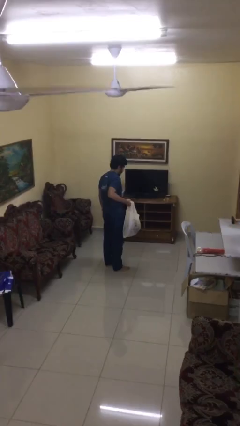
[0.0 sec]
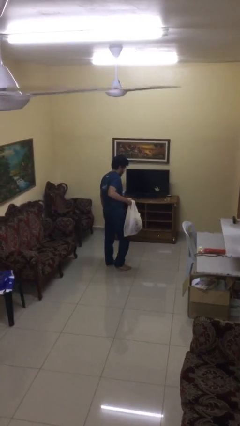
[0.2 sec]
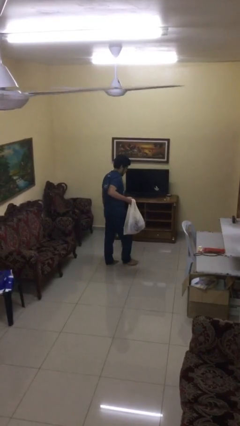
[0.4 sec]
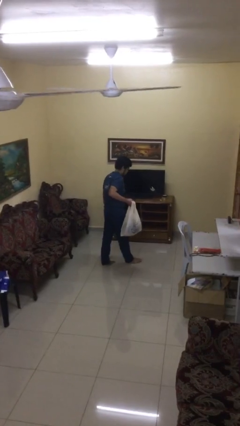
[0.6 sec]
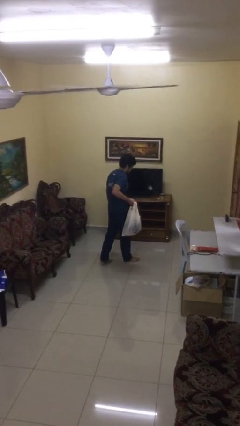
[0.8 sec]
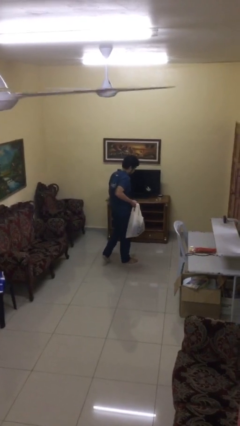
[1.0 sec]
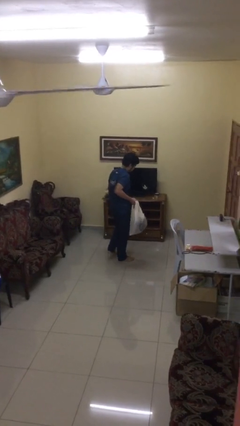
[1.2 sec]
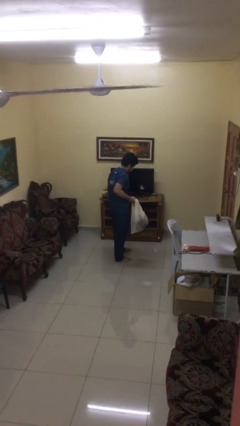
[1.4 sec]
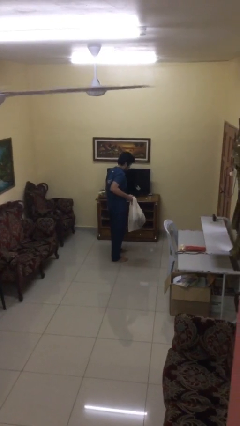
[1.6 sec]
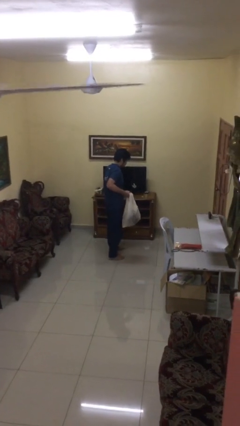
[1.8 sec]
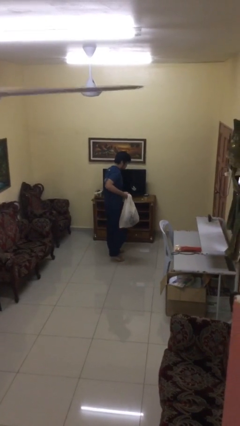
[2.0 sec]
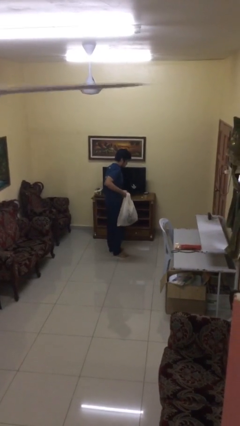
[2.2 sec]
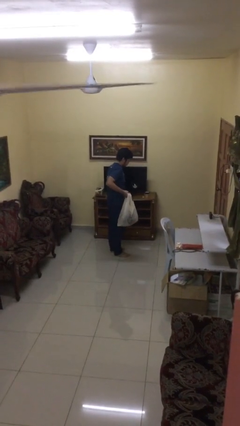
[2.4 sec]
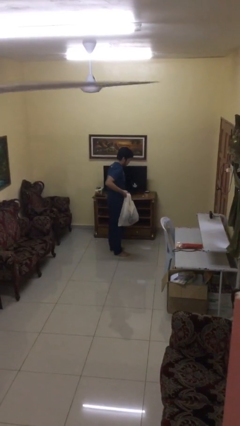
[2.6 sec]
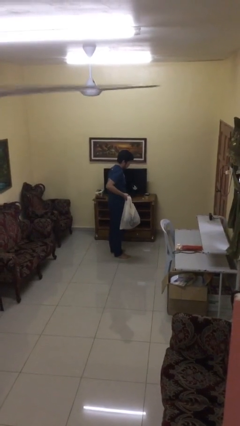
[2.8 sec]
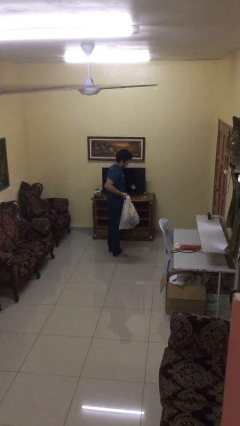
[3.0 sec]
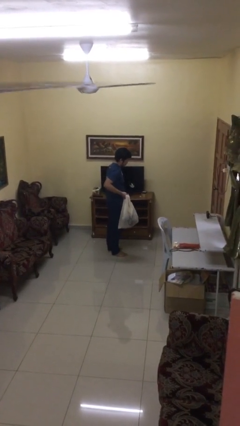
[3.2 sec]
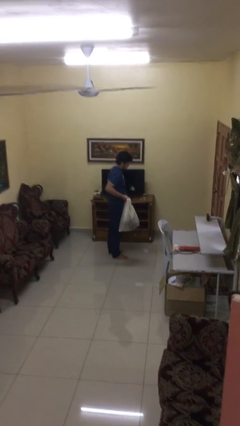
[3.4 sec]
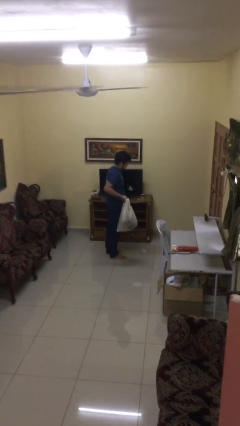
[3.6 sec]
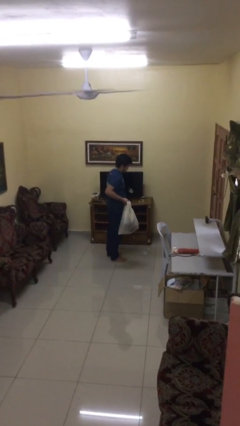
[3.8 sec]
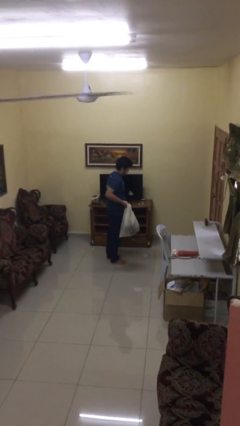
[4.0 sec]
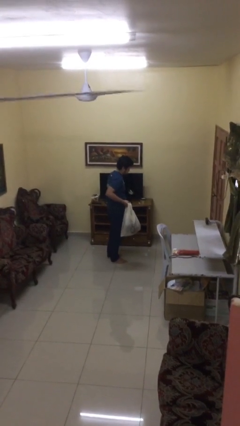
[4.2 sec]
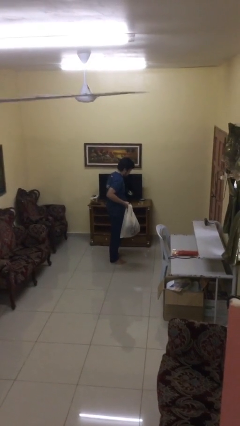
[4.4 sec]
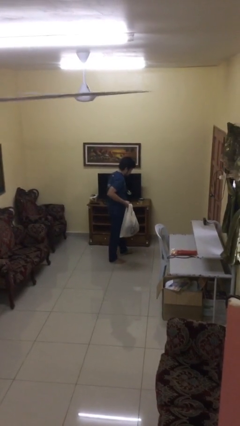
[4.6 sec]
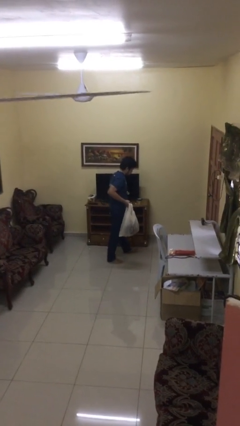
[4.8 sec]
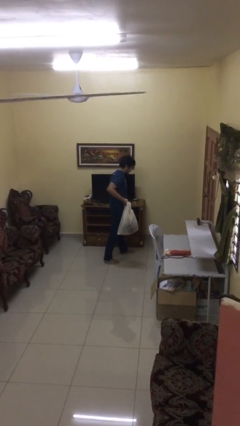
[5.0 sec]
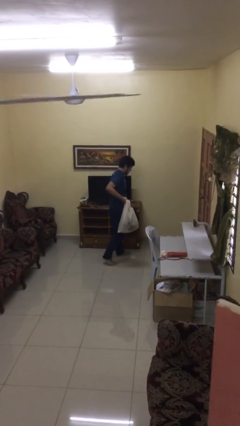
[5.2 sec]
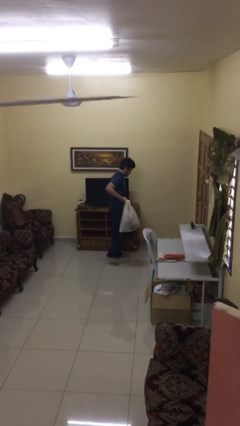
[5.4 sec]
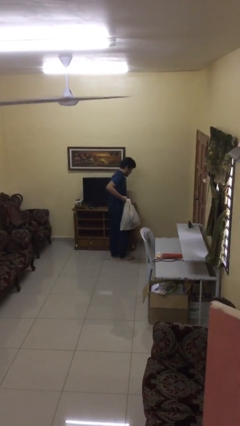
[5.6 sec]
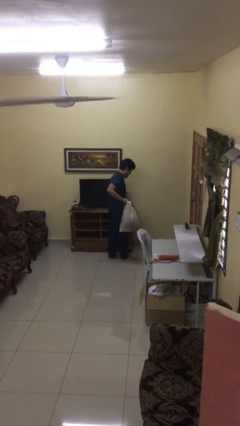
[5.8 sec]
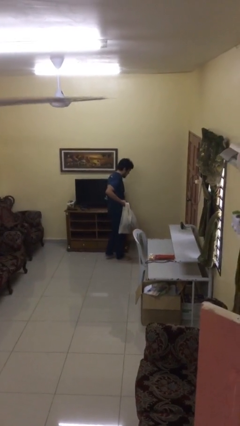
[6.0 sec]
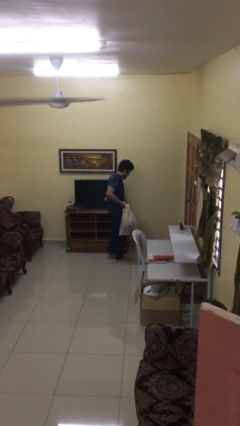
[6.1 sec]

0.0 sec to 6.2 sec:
person carries groceries

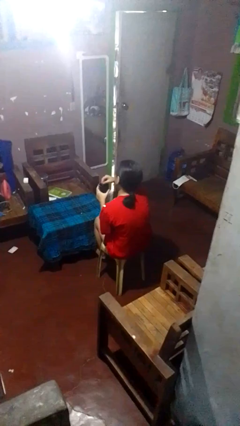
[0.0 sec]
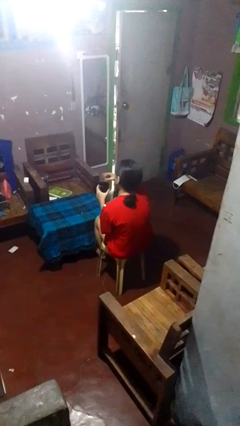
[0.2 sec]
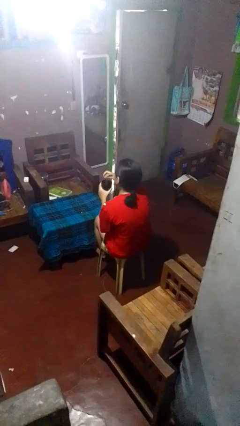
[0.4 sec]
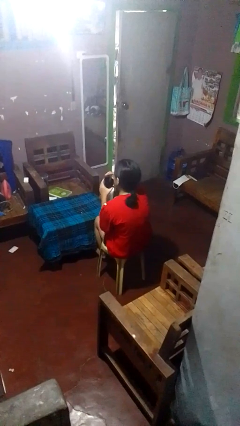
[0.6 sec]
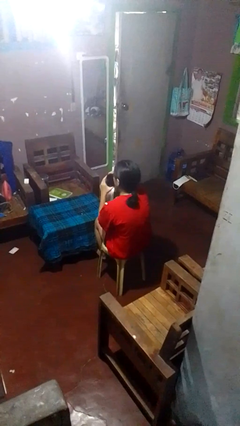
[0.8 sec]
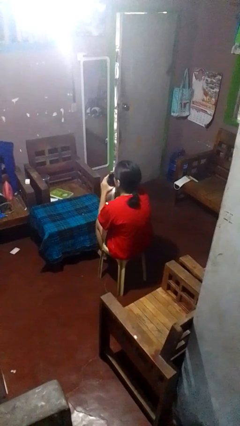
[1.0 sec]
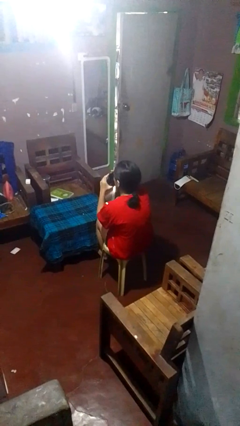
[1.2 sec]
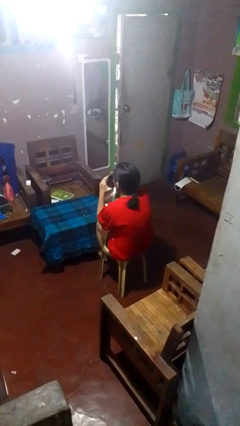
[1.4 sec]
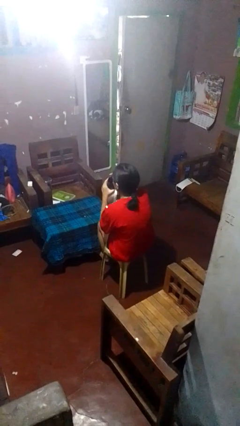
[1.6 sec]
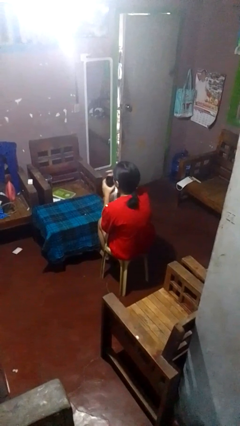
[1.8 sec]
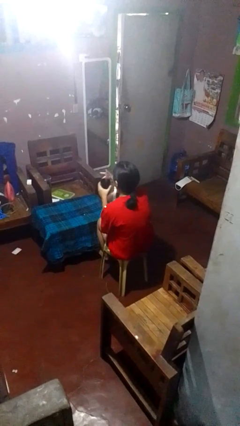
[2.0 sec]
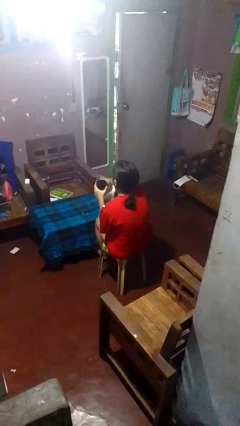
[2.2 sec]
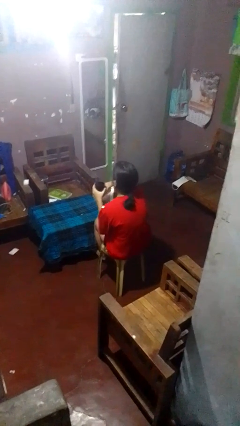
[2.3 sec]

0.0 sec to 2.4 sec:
person drinks from mug

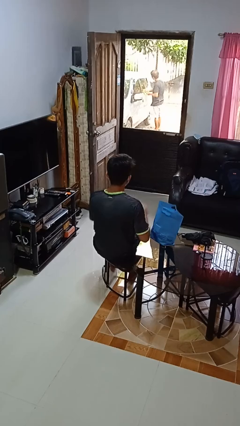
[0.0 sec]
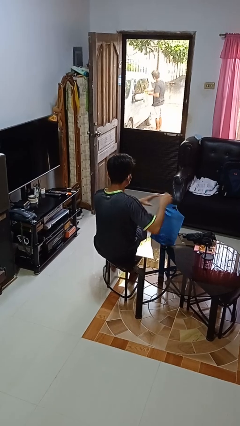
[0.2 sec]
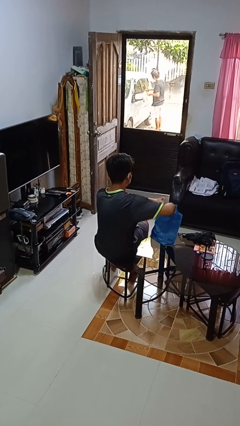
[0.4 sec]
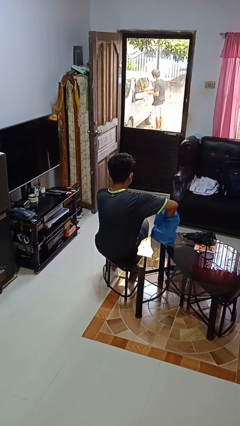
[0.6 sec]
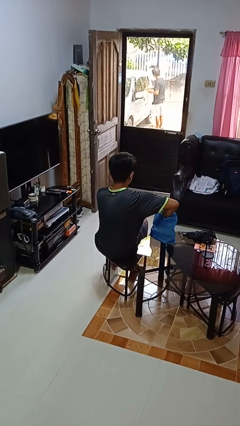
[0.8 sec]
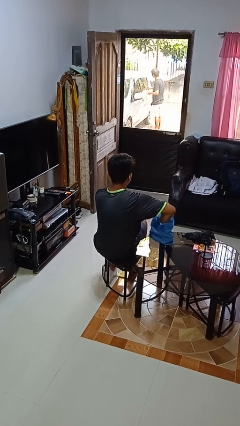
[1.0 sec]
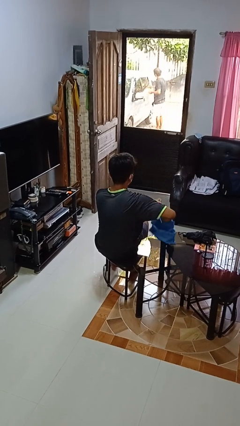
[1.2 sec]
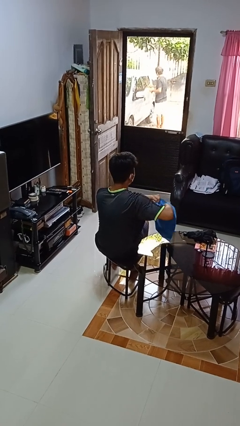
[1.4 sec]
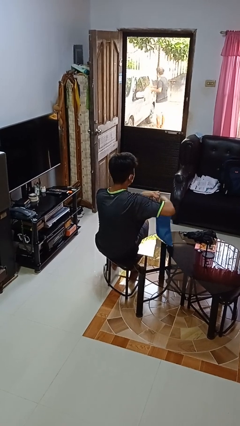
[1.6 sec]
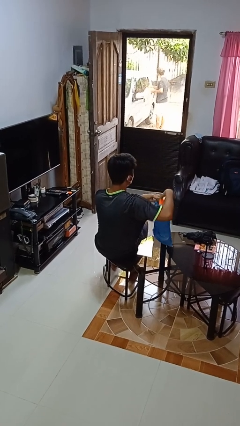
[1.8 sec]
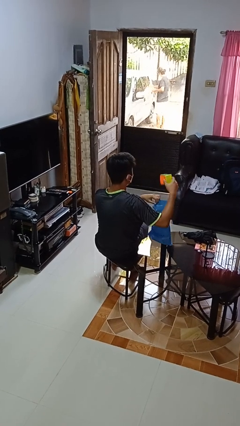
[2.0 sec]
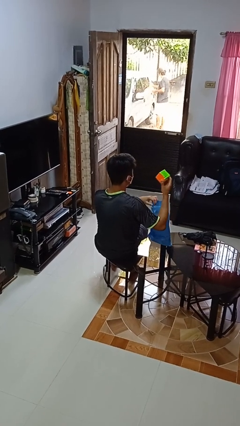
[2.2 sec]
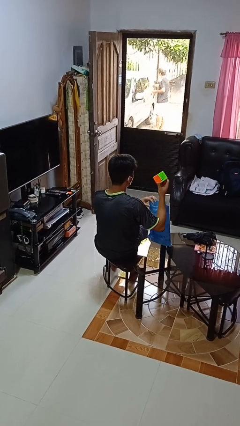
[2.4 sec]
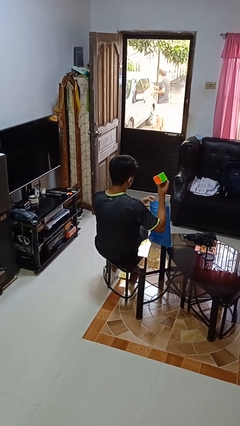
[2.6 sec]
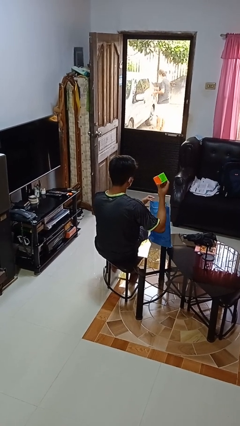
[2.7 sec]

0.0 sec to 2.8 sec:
person takes object from bag

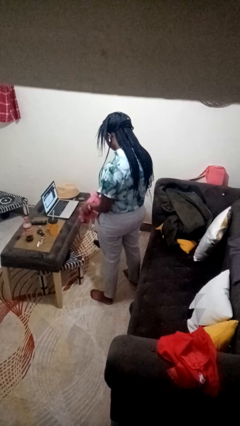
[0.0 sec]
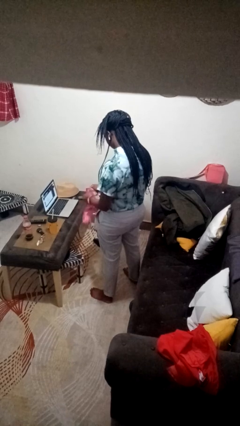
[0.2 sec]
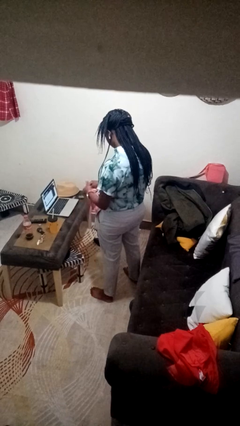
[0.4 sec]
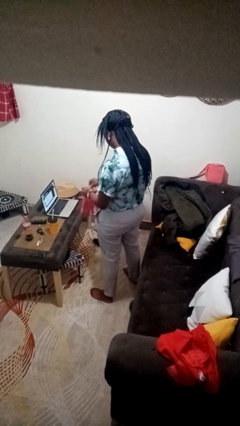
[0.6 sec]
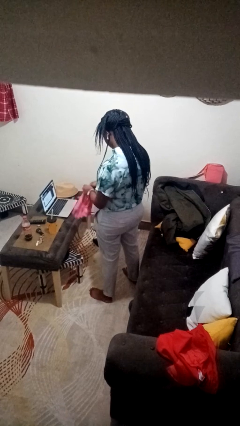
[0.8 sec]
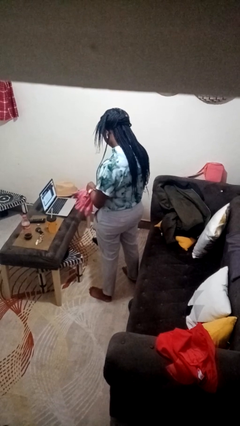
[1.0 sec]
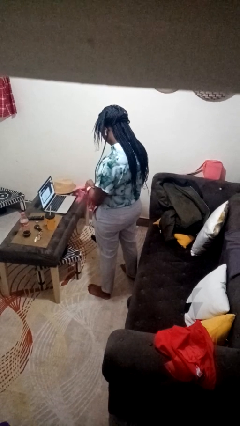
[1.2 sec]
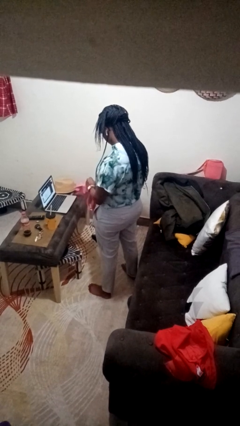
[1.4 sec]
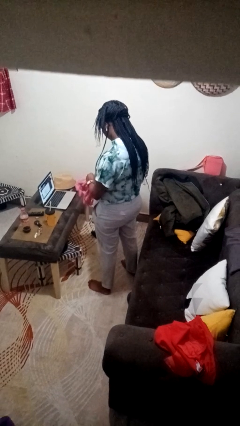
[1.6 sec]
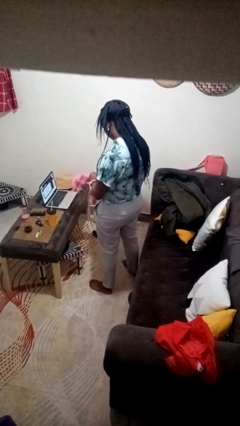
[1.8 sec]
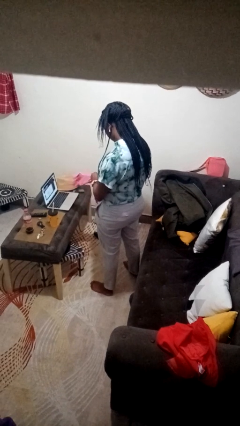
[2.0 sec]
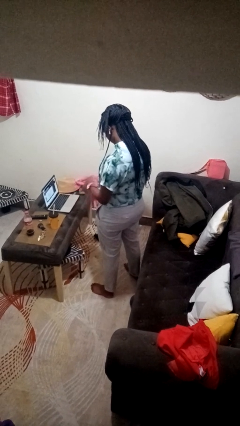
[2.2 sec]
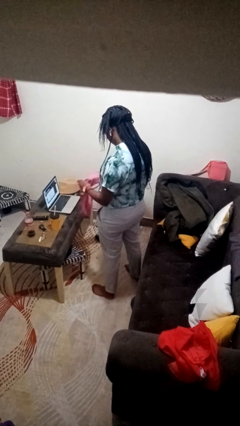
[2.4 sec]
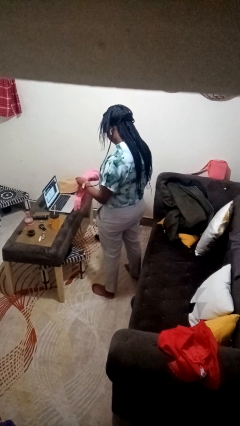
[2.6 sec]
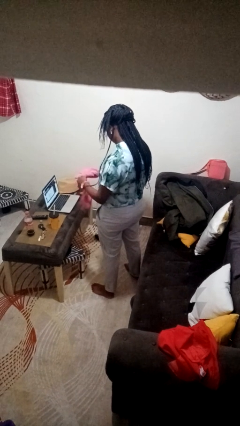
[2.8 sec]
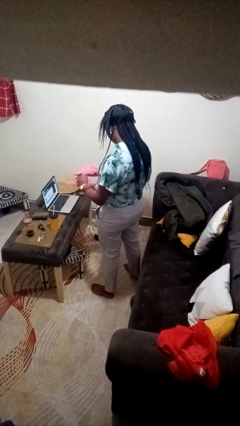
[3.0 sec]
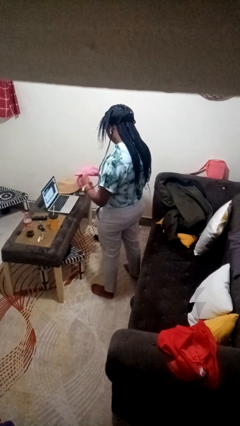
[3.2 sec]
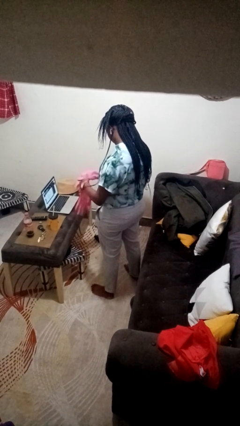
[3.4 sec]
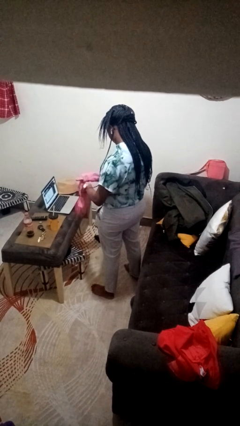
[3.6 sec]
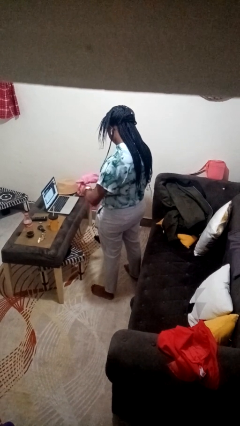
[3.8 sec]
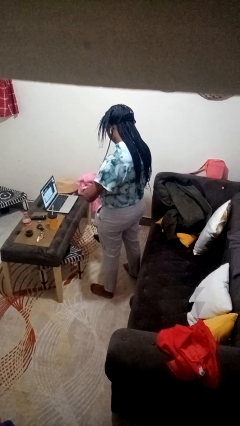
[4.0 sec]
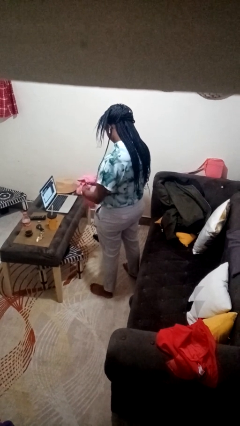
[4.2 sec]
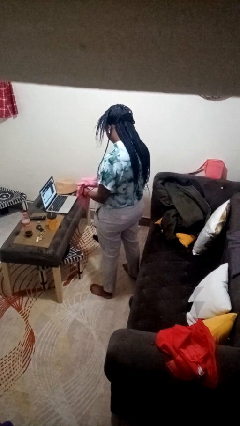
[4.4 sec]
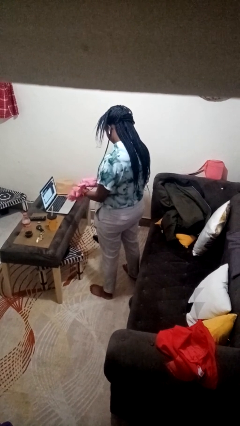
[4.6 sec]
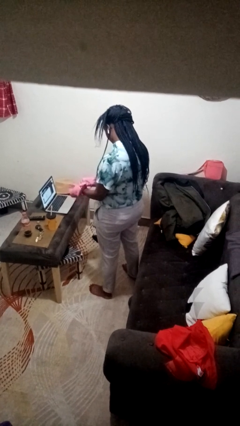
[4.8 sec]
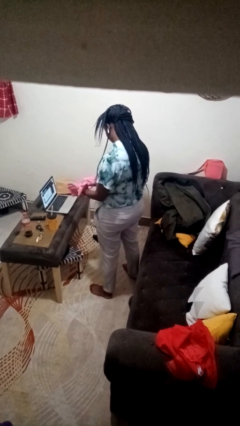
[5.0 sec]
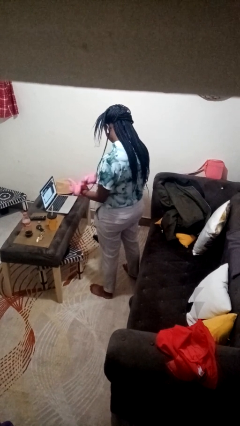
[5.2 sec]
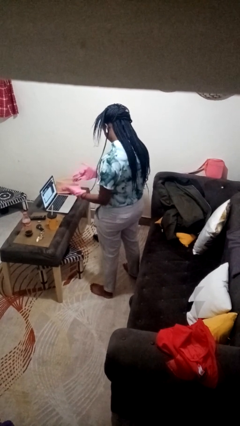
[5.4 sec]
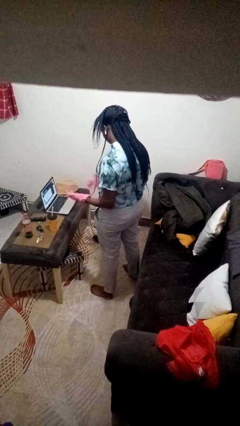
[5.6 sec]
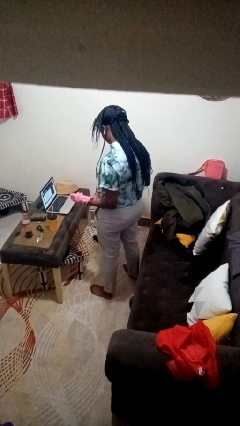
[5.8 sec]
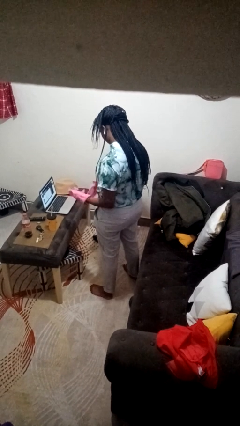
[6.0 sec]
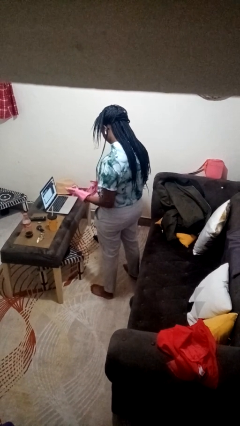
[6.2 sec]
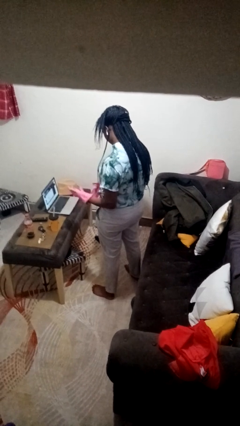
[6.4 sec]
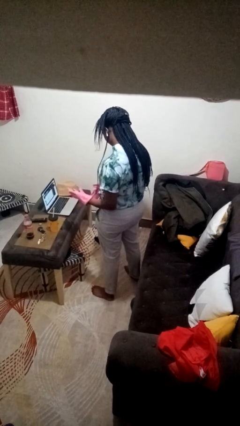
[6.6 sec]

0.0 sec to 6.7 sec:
person puts on gloves
